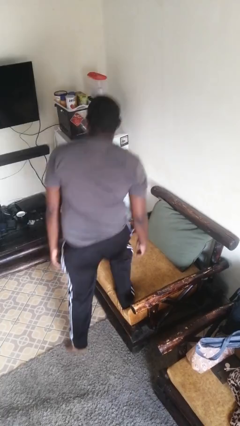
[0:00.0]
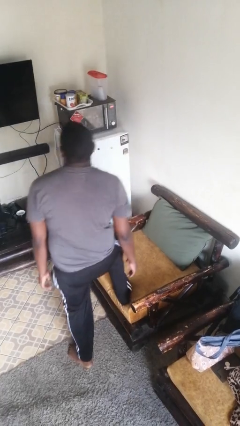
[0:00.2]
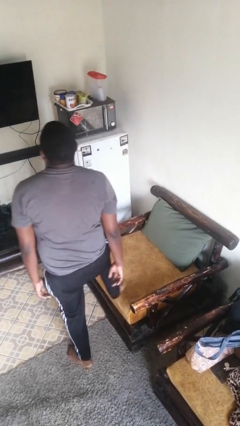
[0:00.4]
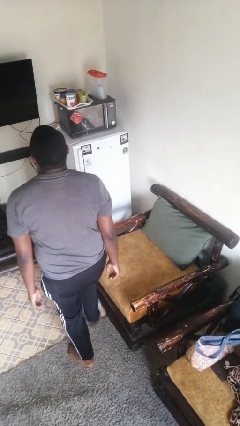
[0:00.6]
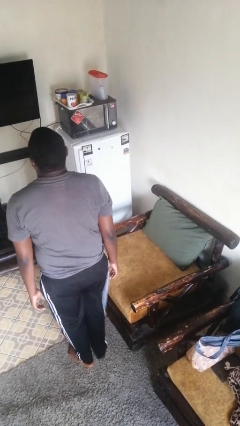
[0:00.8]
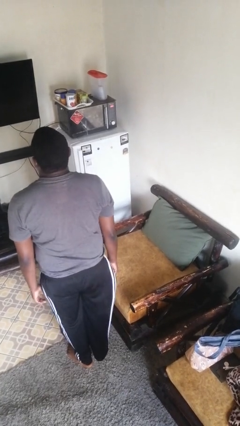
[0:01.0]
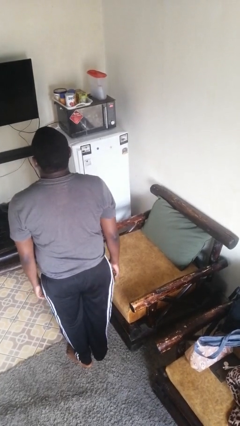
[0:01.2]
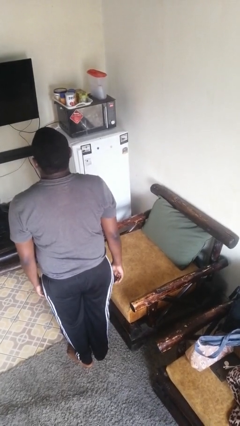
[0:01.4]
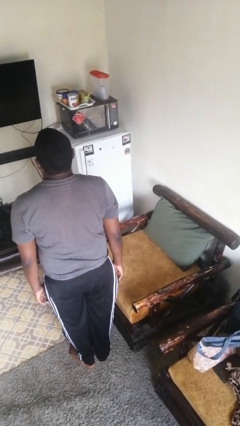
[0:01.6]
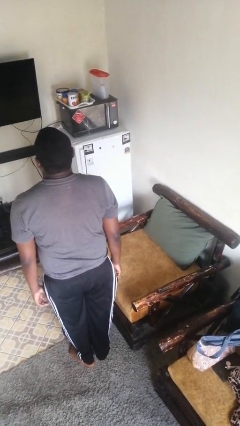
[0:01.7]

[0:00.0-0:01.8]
person climbs off couch

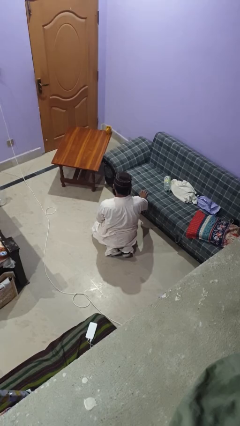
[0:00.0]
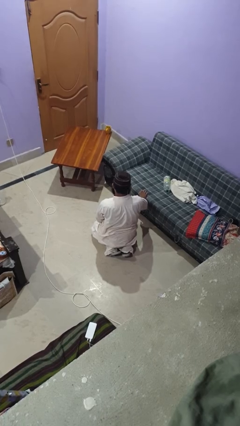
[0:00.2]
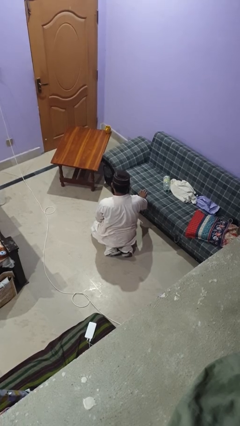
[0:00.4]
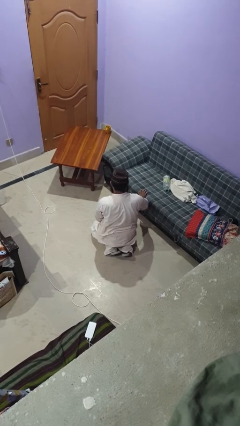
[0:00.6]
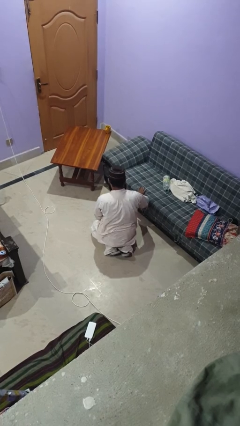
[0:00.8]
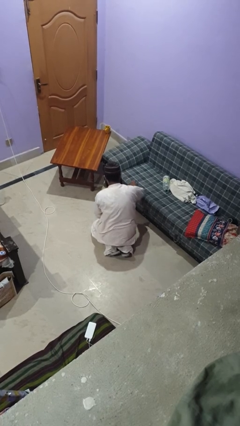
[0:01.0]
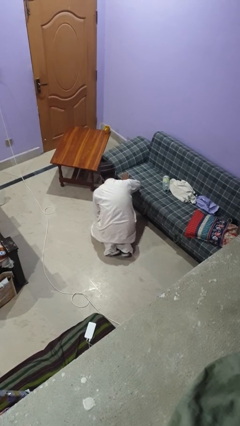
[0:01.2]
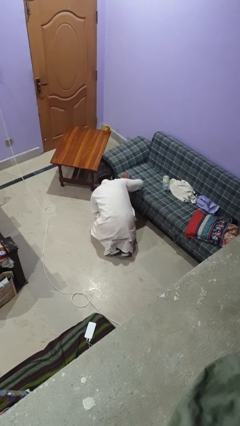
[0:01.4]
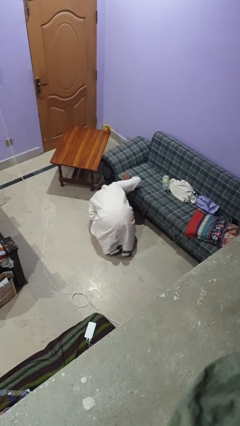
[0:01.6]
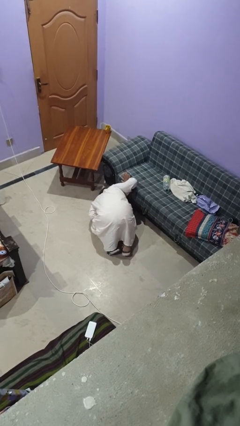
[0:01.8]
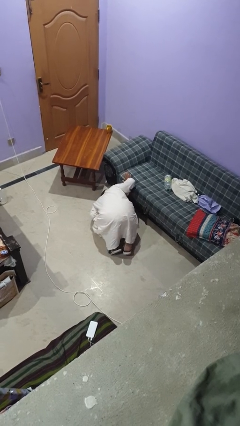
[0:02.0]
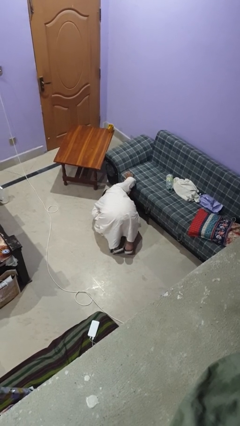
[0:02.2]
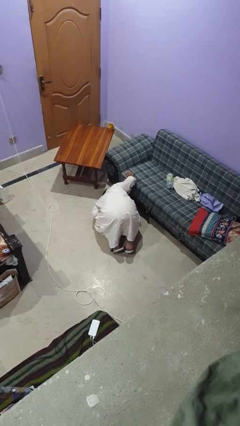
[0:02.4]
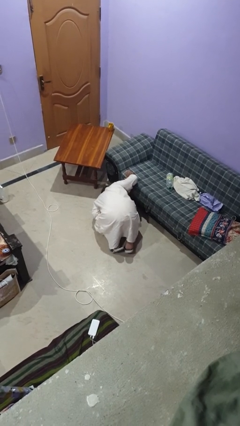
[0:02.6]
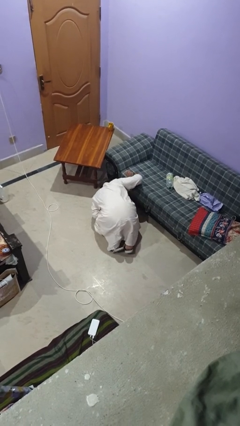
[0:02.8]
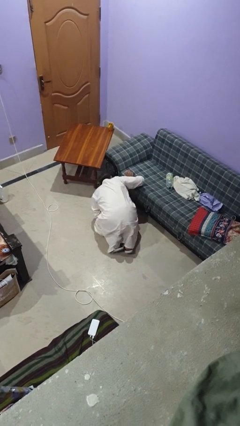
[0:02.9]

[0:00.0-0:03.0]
person searches under couch

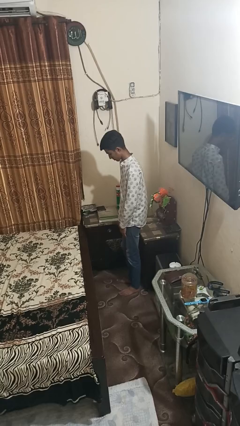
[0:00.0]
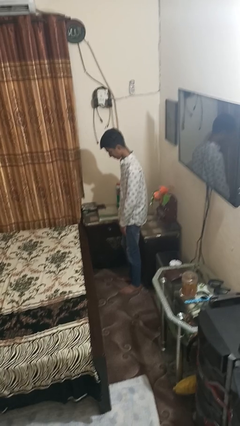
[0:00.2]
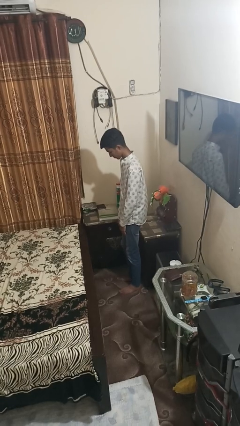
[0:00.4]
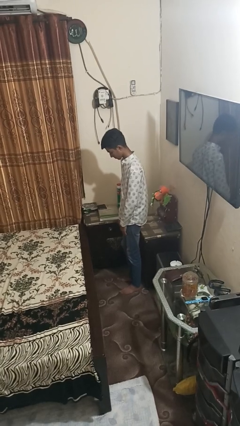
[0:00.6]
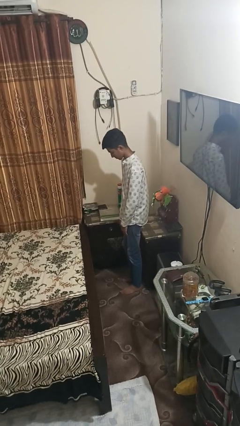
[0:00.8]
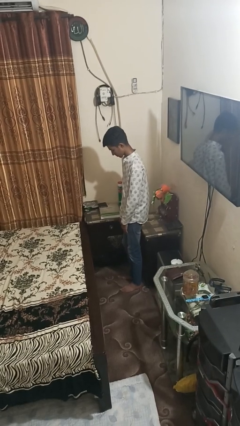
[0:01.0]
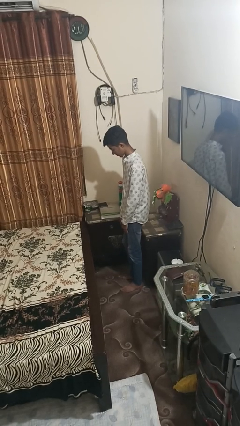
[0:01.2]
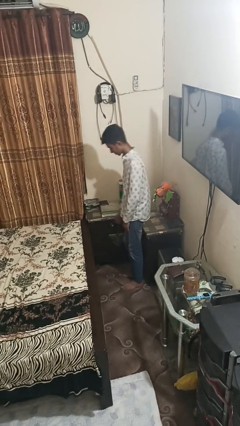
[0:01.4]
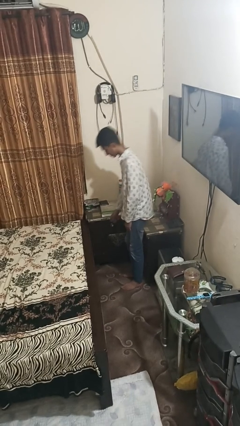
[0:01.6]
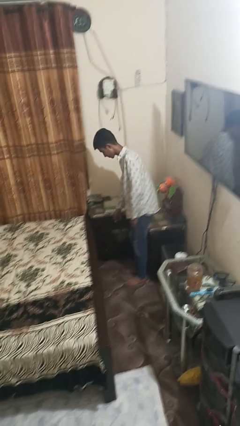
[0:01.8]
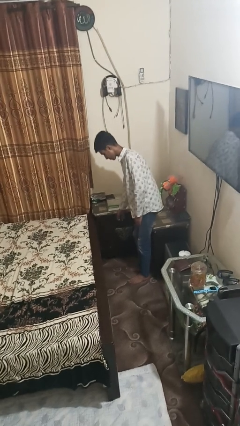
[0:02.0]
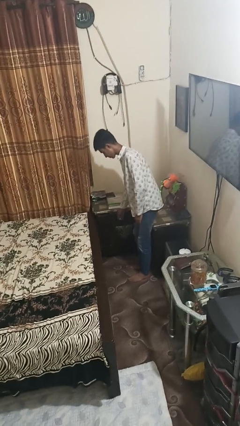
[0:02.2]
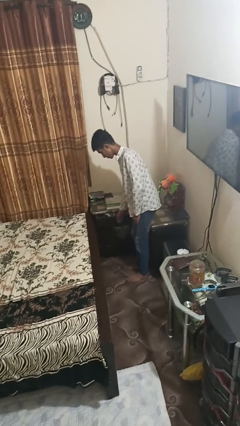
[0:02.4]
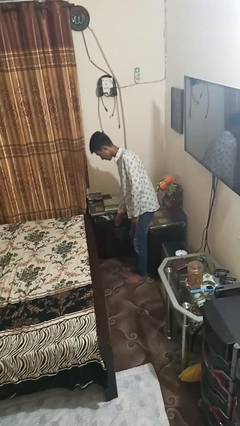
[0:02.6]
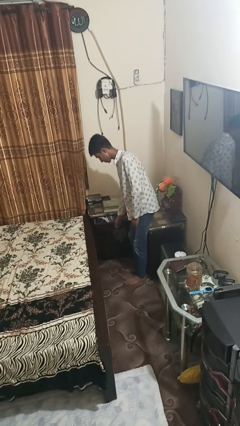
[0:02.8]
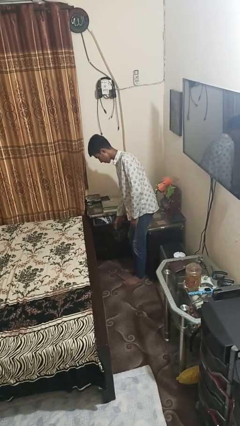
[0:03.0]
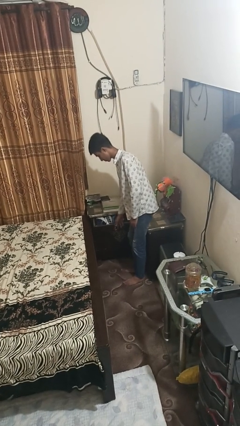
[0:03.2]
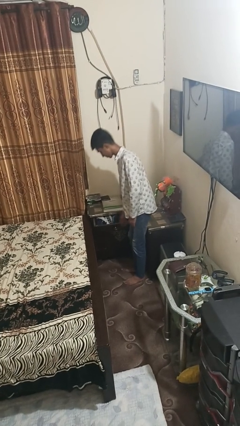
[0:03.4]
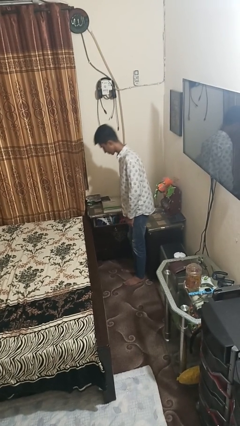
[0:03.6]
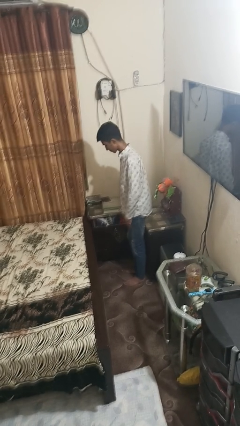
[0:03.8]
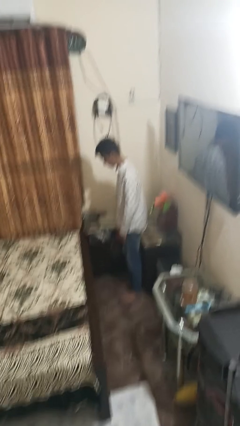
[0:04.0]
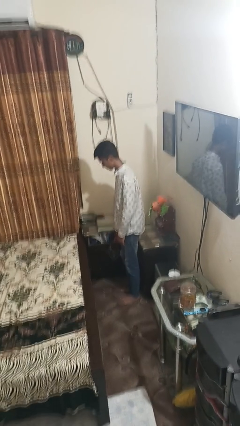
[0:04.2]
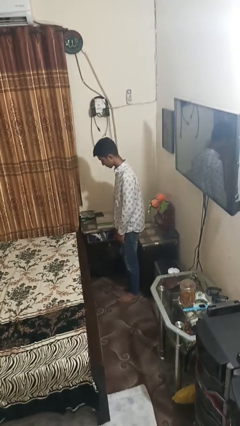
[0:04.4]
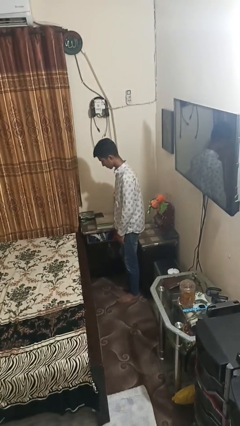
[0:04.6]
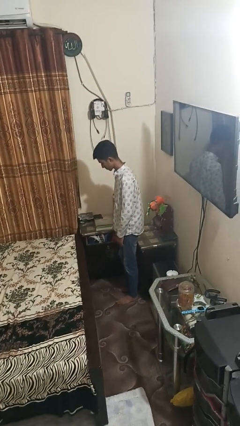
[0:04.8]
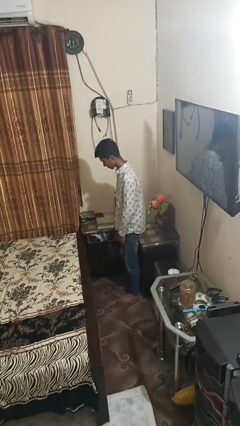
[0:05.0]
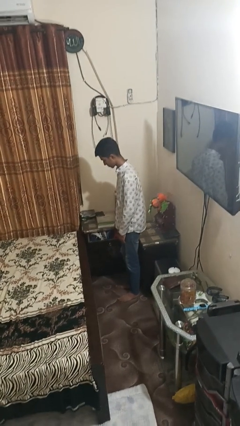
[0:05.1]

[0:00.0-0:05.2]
person opens dresser drawer

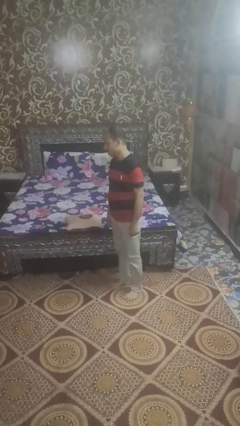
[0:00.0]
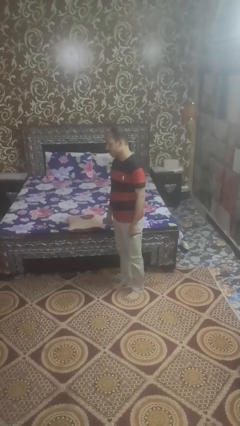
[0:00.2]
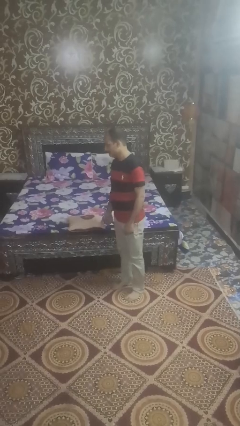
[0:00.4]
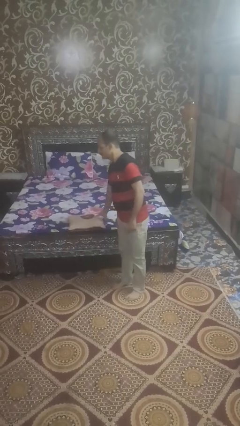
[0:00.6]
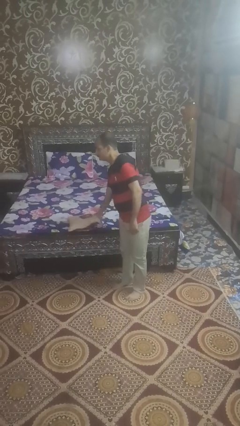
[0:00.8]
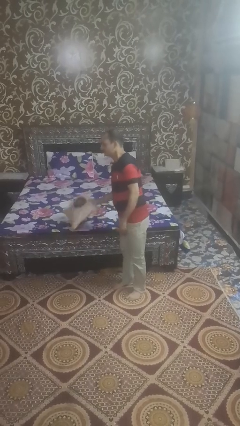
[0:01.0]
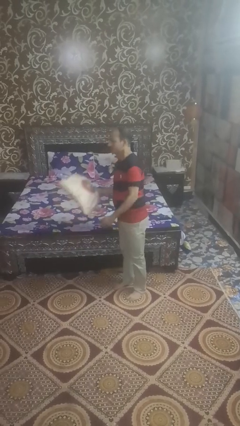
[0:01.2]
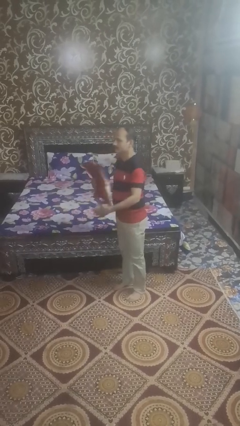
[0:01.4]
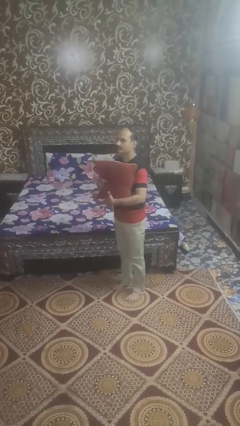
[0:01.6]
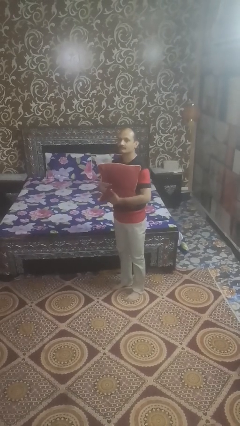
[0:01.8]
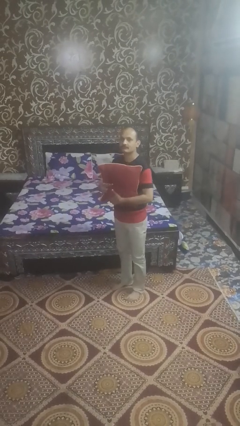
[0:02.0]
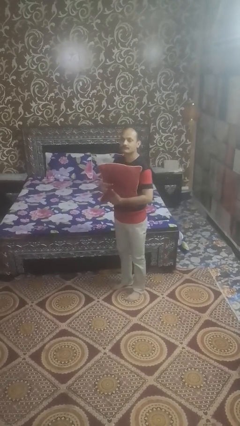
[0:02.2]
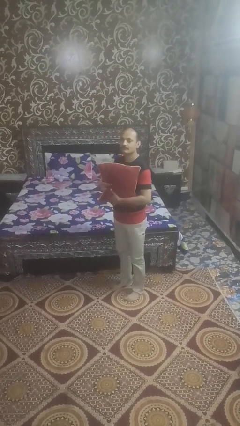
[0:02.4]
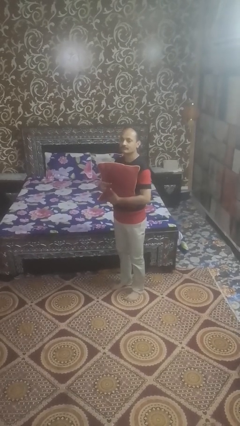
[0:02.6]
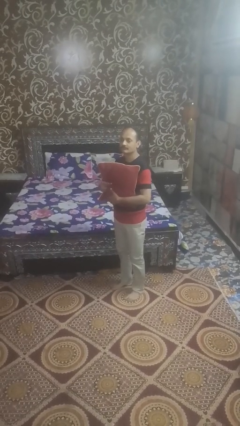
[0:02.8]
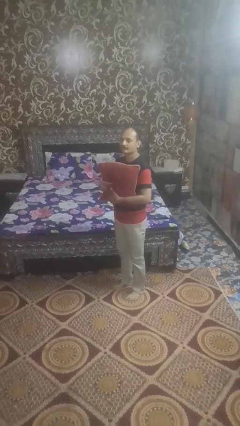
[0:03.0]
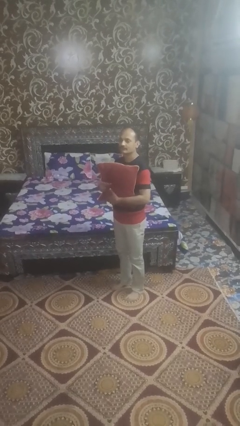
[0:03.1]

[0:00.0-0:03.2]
person picks up object from bed

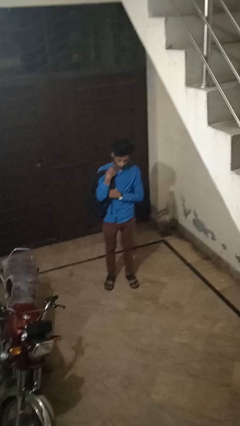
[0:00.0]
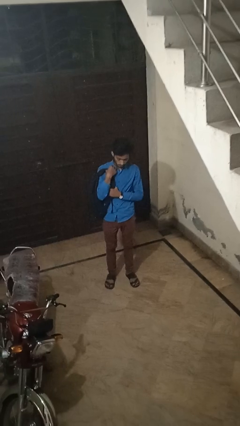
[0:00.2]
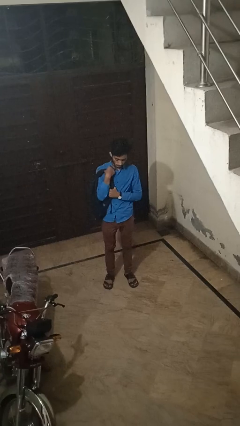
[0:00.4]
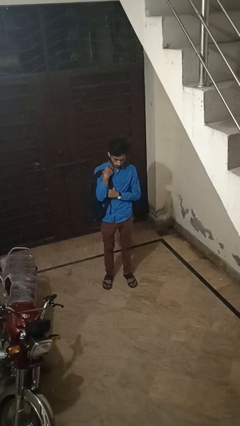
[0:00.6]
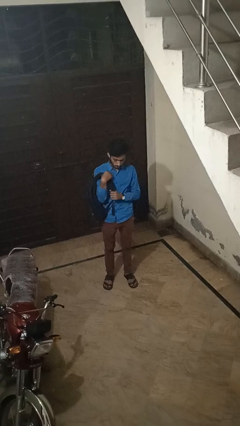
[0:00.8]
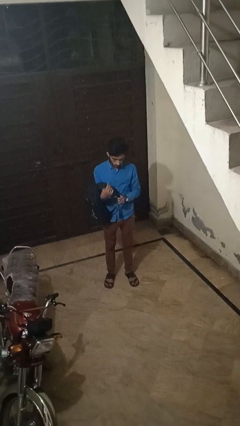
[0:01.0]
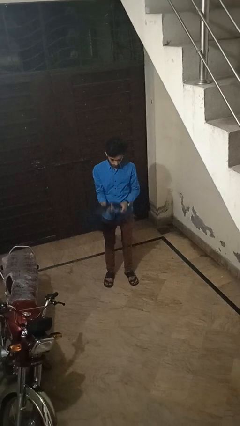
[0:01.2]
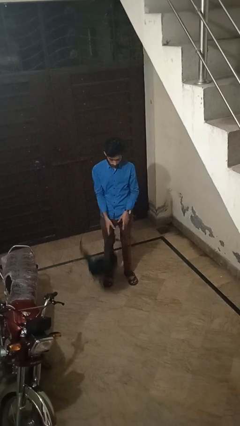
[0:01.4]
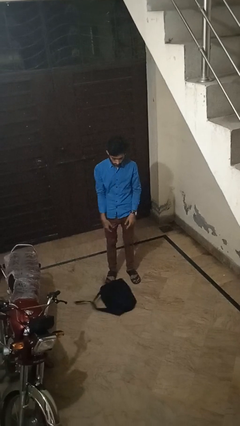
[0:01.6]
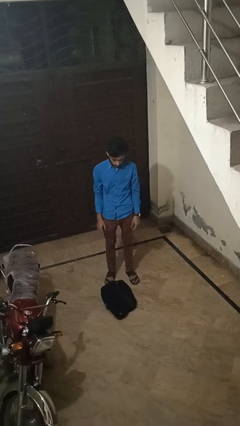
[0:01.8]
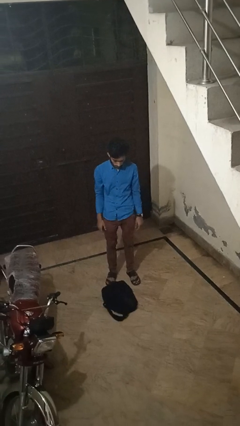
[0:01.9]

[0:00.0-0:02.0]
person drops object

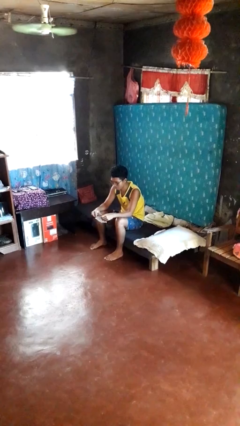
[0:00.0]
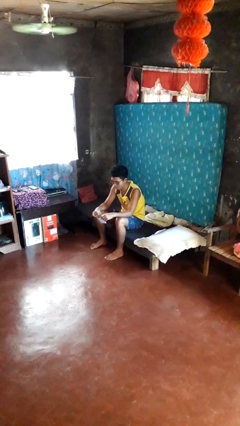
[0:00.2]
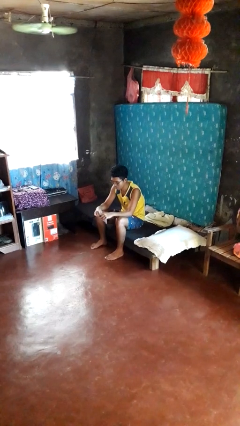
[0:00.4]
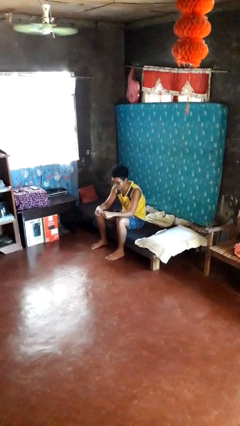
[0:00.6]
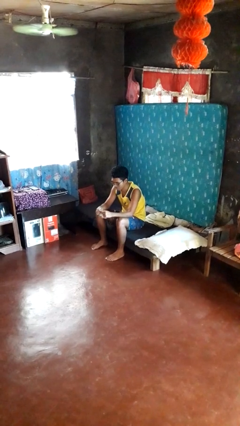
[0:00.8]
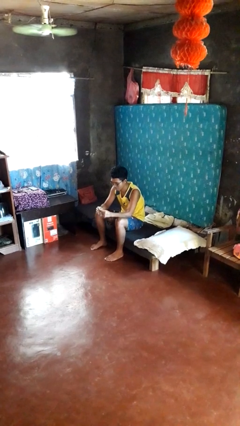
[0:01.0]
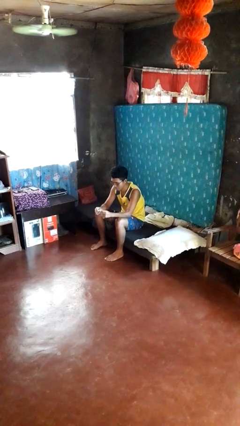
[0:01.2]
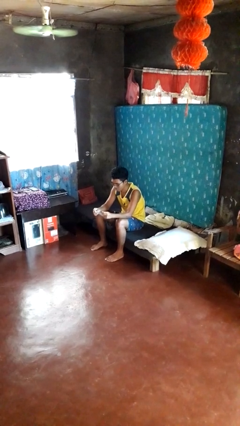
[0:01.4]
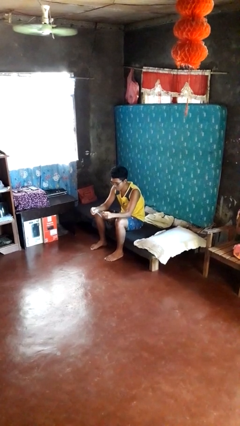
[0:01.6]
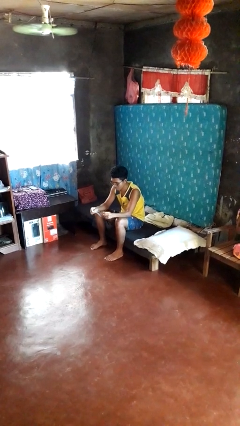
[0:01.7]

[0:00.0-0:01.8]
person tears paper

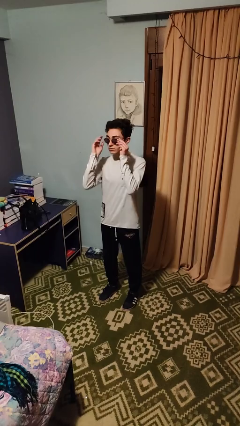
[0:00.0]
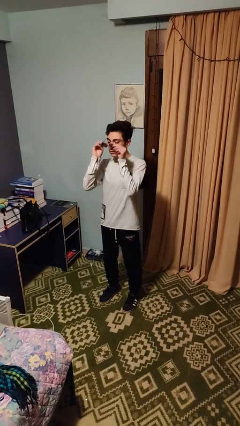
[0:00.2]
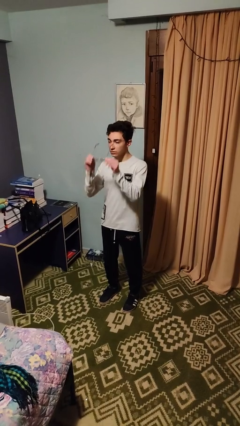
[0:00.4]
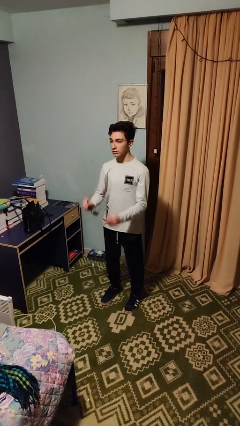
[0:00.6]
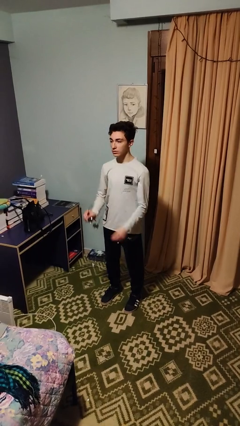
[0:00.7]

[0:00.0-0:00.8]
person takes off sunglasses
